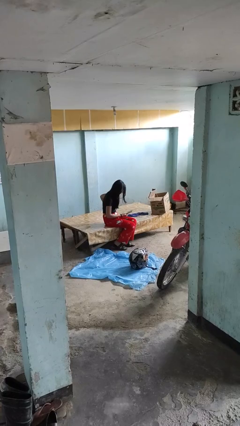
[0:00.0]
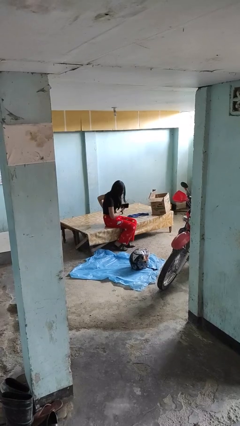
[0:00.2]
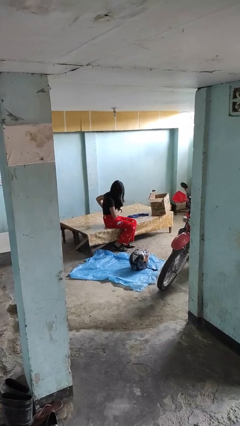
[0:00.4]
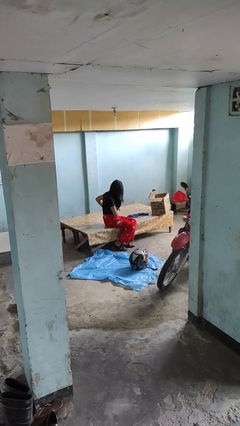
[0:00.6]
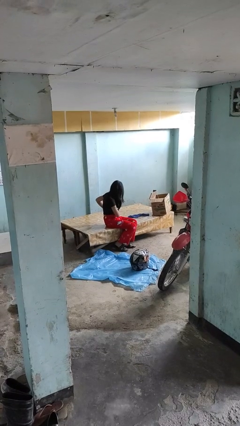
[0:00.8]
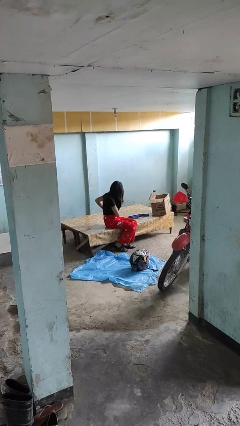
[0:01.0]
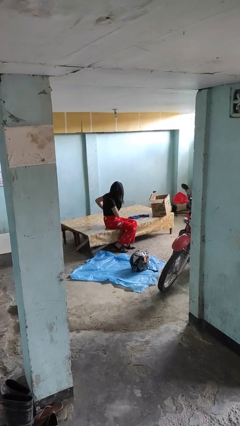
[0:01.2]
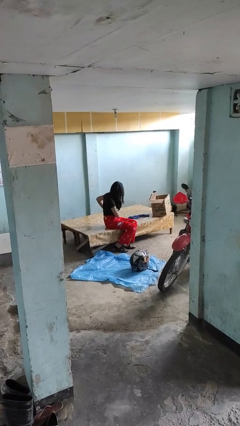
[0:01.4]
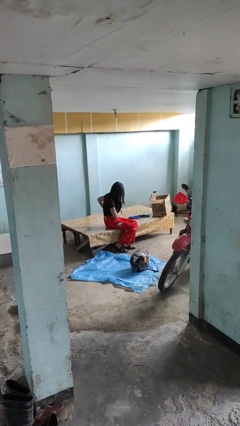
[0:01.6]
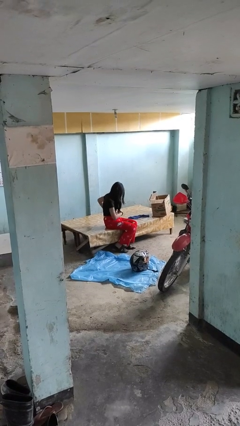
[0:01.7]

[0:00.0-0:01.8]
person puts phone into pocket

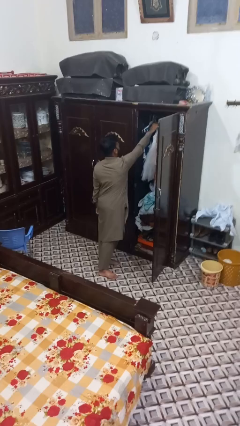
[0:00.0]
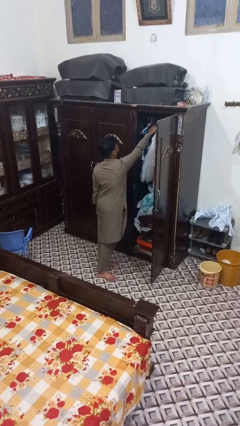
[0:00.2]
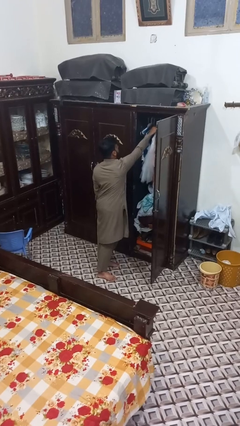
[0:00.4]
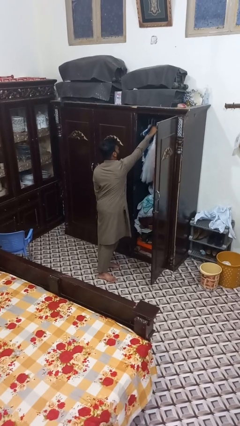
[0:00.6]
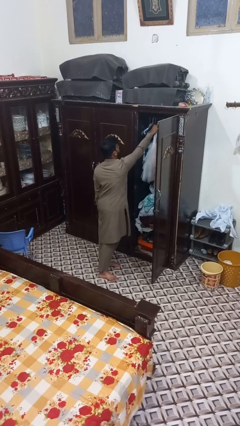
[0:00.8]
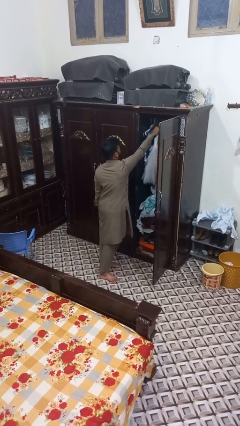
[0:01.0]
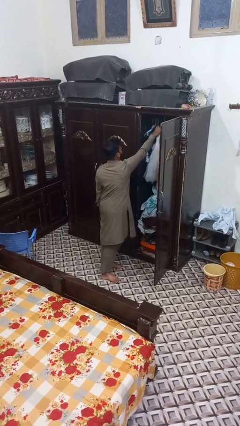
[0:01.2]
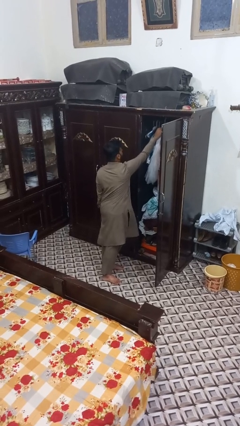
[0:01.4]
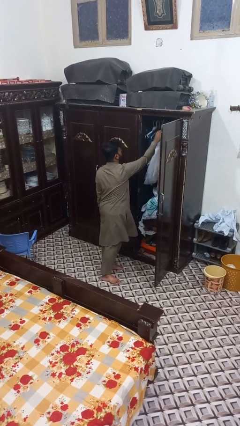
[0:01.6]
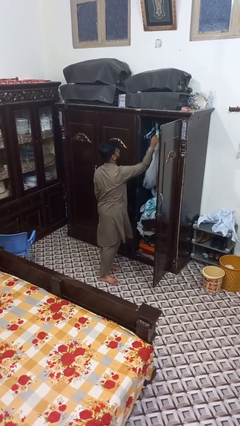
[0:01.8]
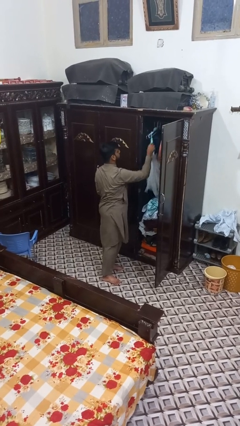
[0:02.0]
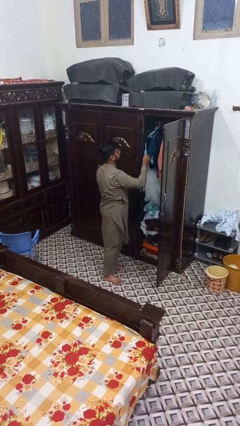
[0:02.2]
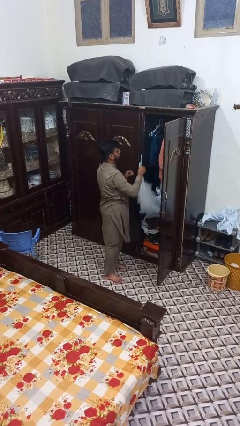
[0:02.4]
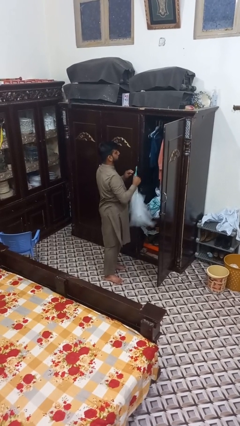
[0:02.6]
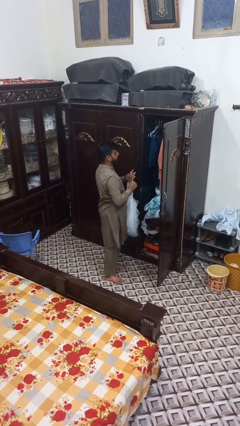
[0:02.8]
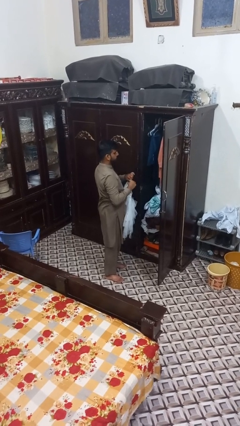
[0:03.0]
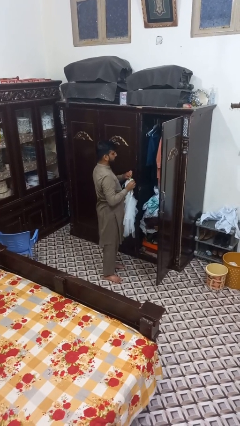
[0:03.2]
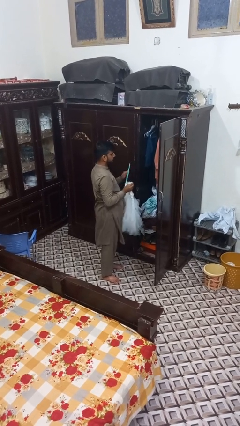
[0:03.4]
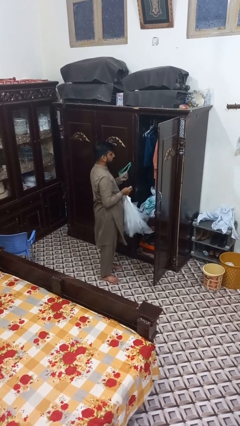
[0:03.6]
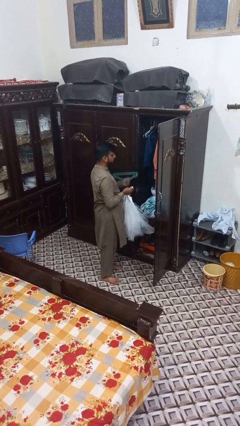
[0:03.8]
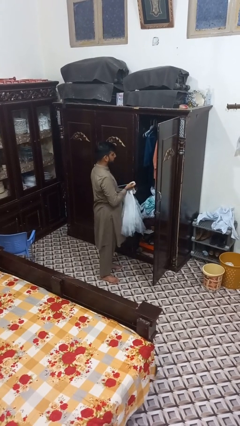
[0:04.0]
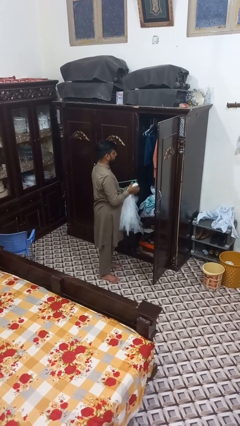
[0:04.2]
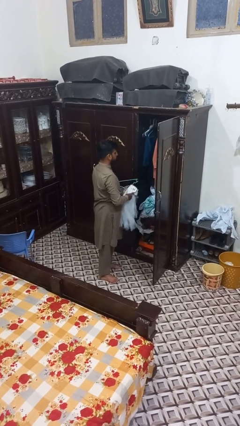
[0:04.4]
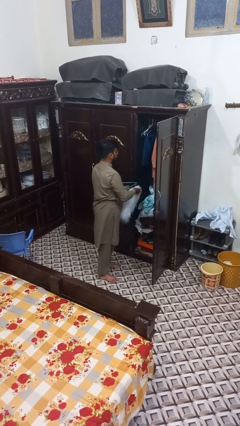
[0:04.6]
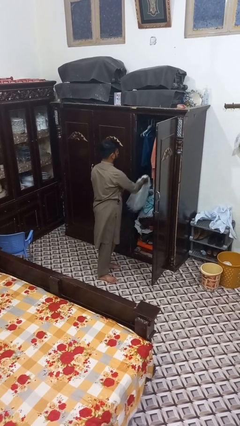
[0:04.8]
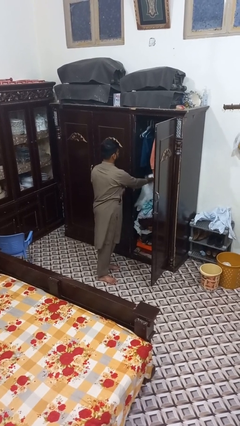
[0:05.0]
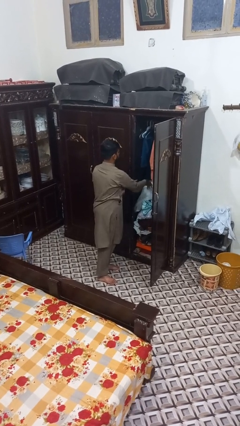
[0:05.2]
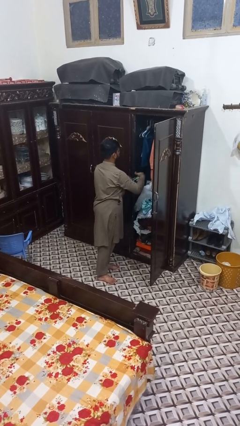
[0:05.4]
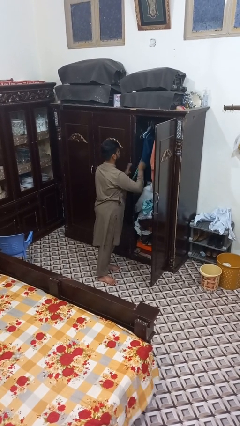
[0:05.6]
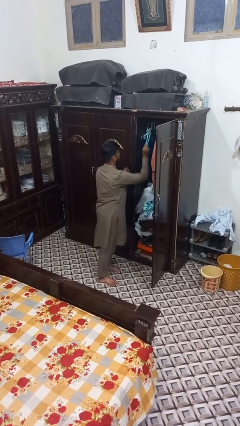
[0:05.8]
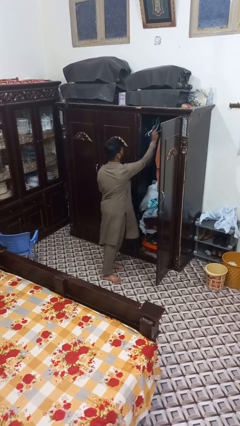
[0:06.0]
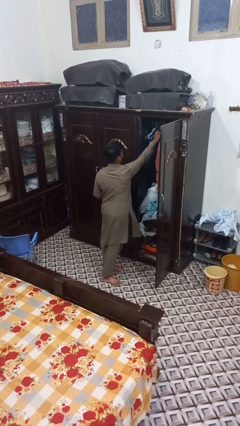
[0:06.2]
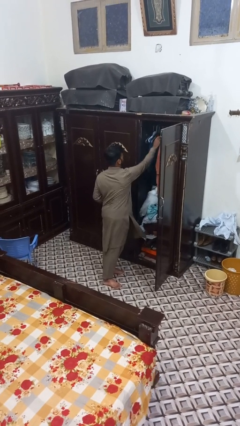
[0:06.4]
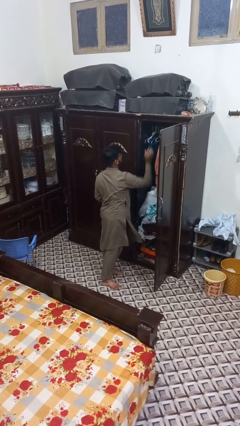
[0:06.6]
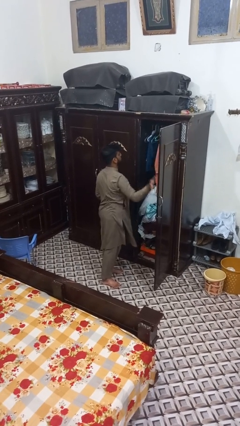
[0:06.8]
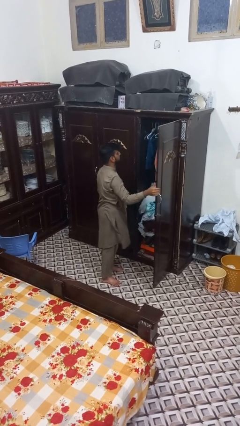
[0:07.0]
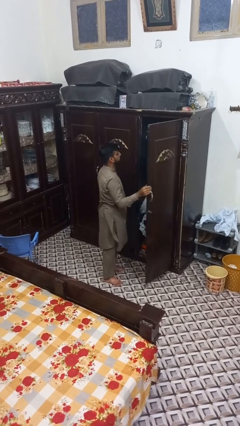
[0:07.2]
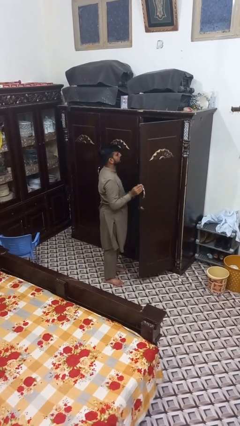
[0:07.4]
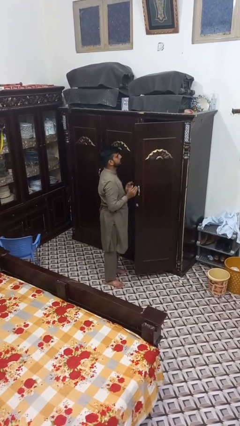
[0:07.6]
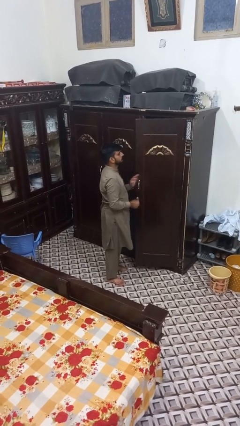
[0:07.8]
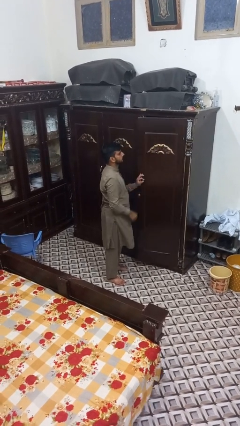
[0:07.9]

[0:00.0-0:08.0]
person takes clothes from closet

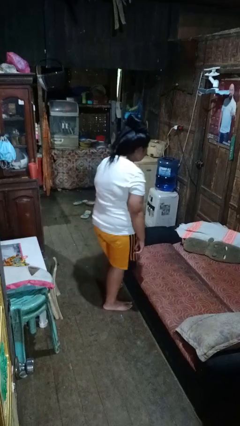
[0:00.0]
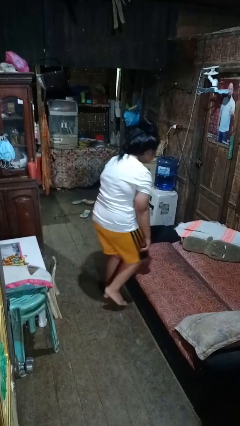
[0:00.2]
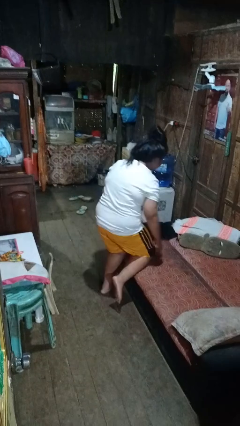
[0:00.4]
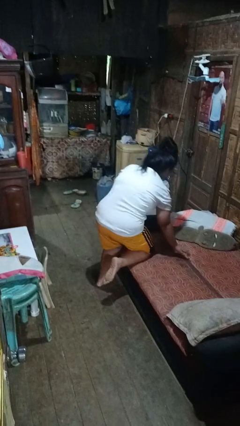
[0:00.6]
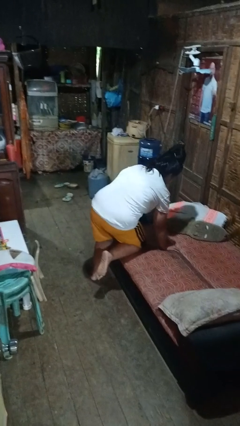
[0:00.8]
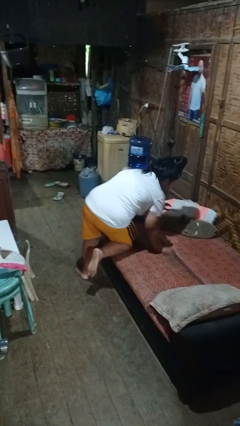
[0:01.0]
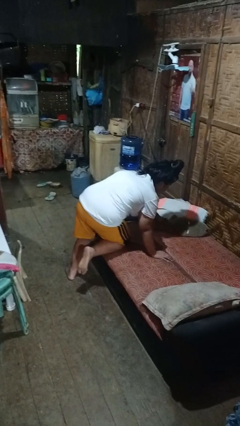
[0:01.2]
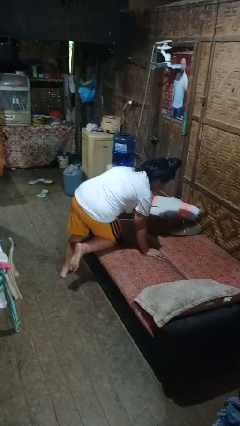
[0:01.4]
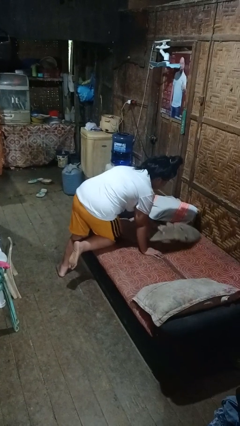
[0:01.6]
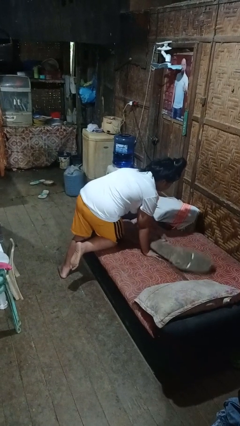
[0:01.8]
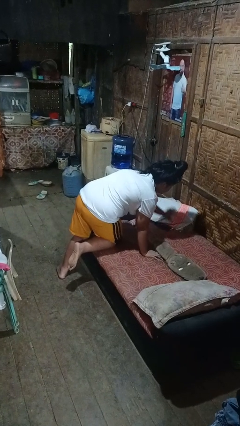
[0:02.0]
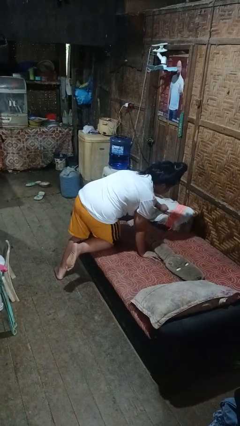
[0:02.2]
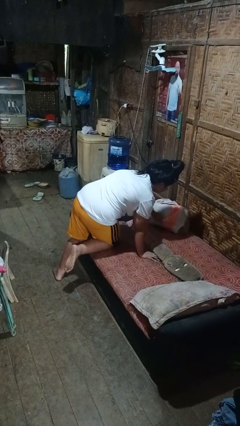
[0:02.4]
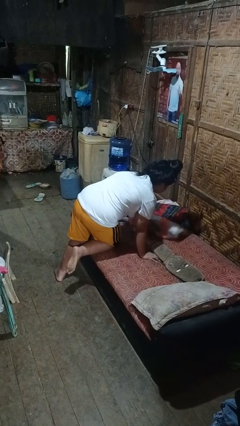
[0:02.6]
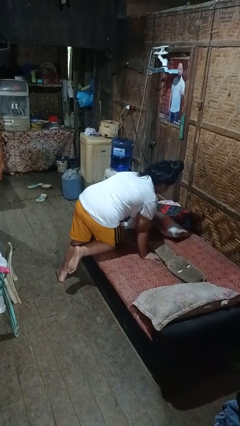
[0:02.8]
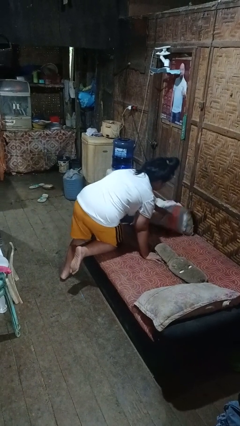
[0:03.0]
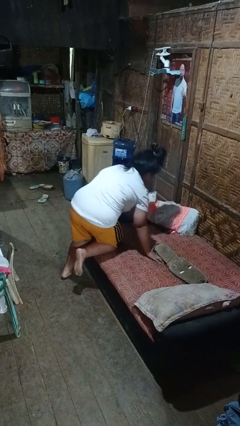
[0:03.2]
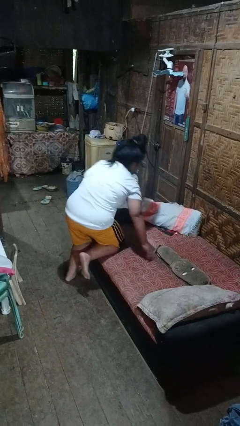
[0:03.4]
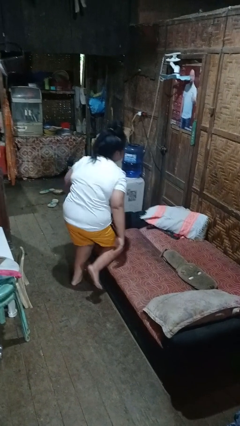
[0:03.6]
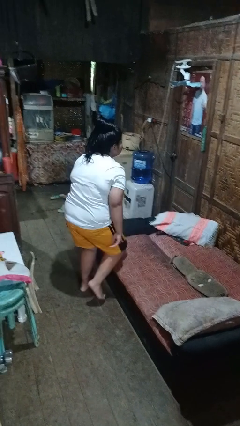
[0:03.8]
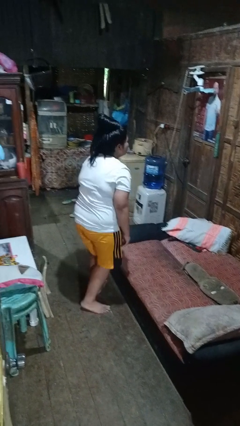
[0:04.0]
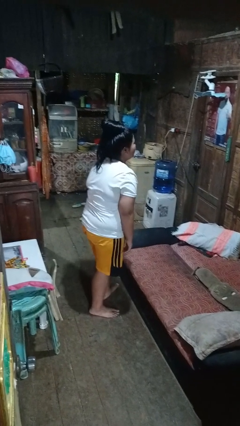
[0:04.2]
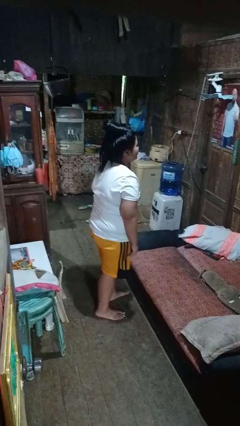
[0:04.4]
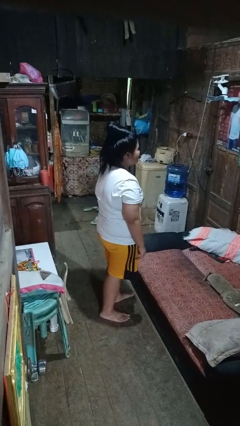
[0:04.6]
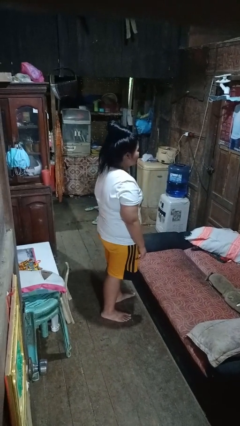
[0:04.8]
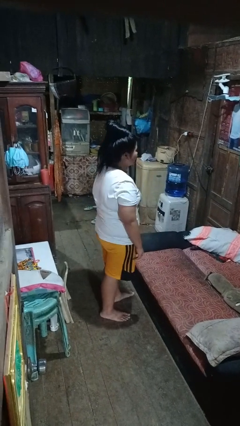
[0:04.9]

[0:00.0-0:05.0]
person searches in couch

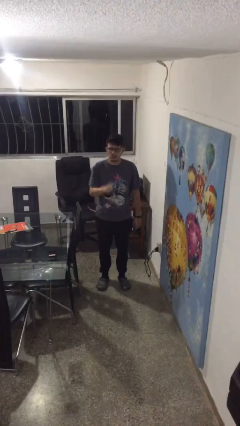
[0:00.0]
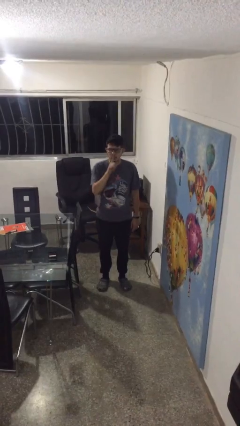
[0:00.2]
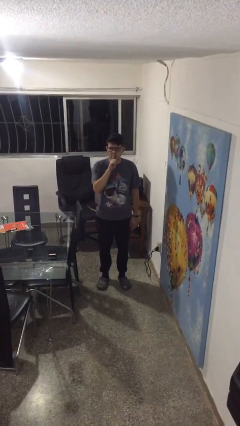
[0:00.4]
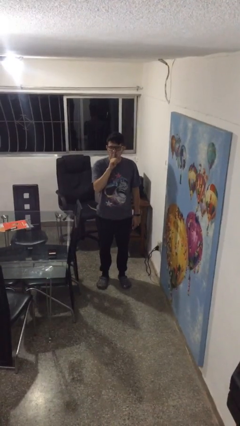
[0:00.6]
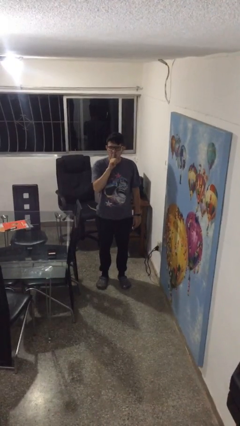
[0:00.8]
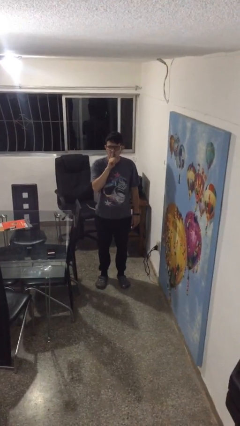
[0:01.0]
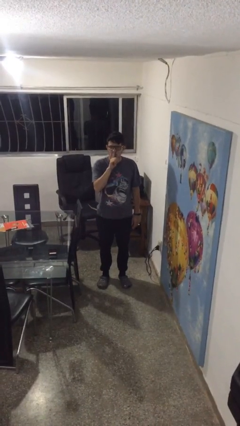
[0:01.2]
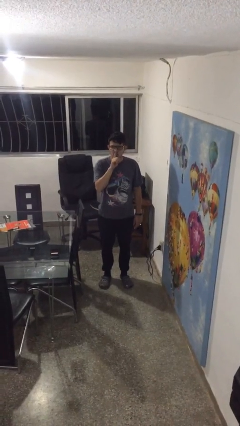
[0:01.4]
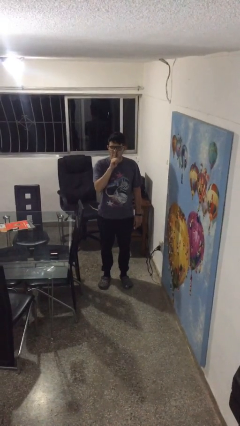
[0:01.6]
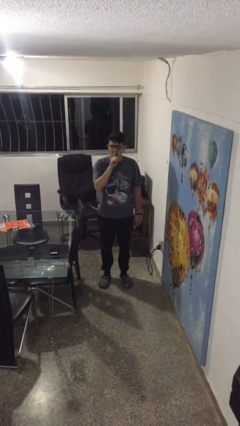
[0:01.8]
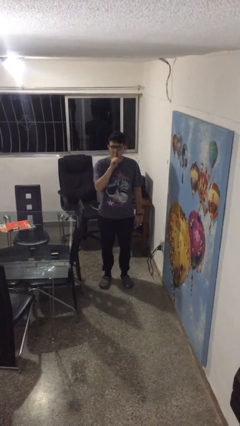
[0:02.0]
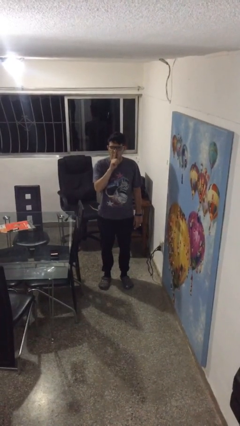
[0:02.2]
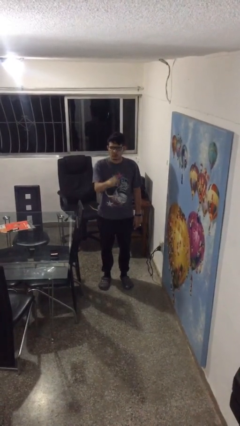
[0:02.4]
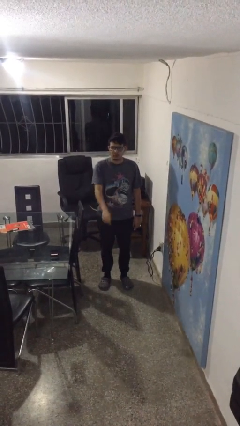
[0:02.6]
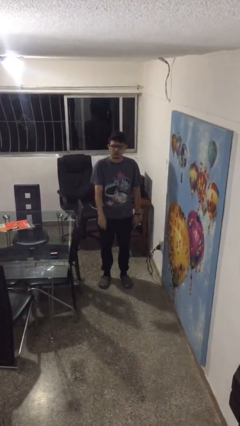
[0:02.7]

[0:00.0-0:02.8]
person gestures be quiet
